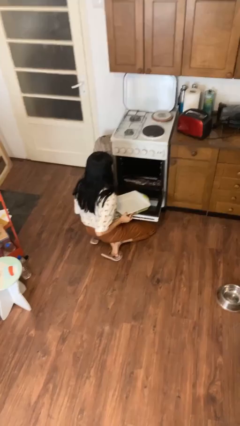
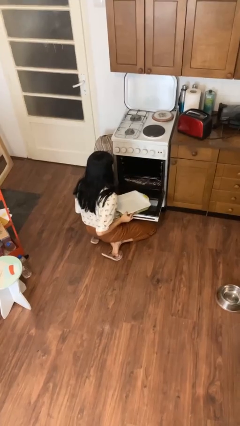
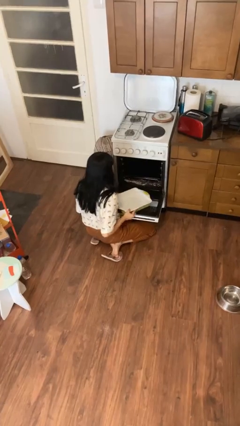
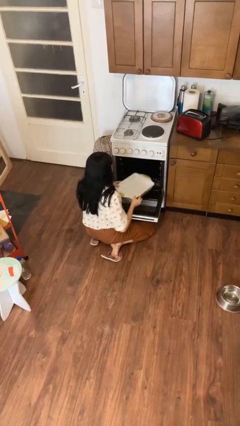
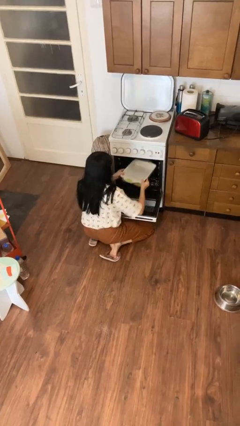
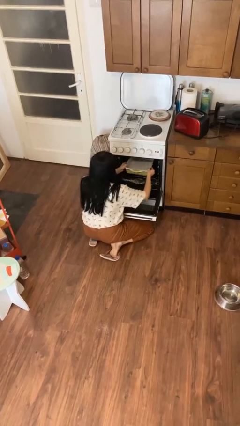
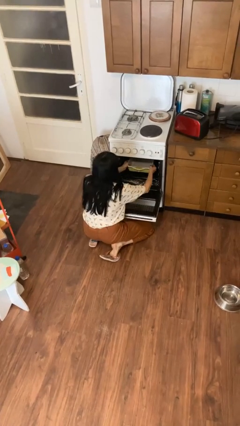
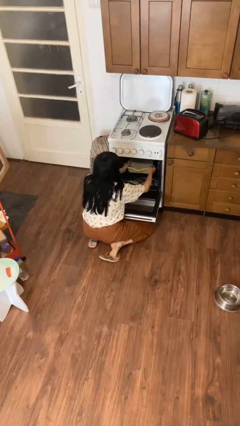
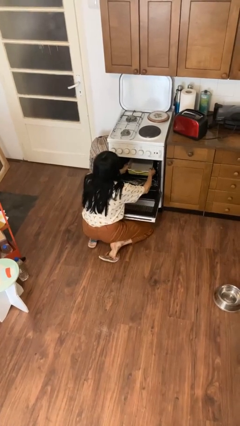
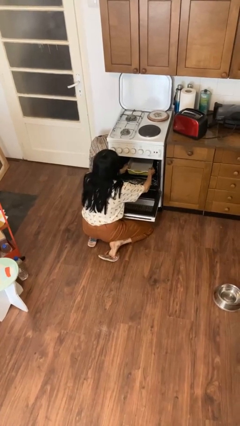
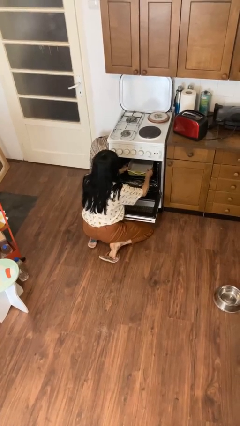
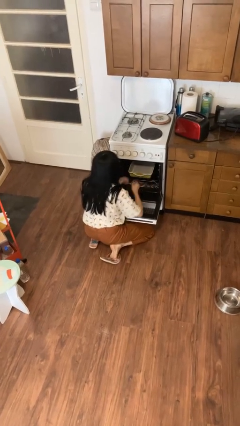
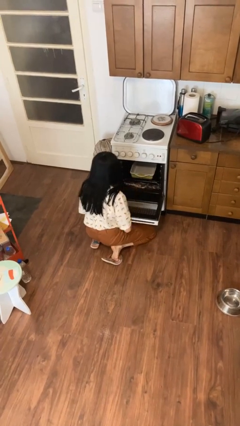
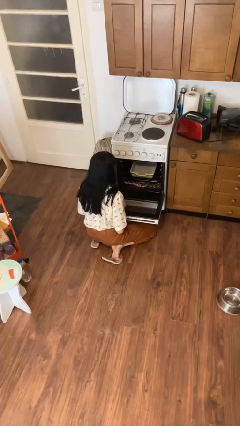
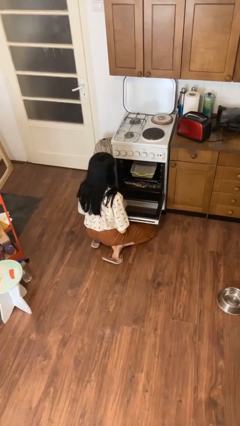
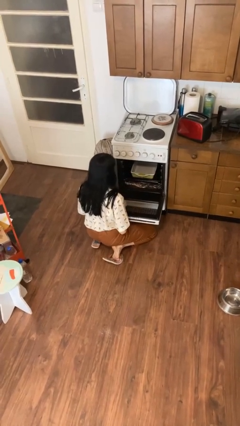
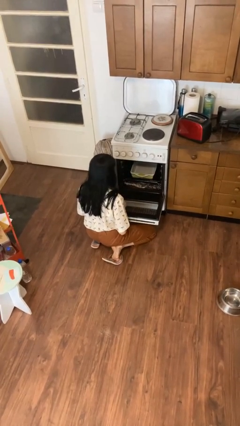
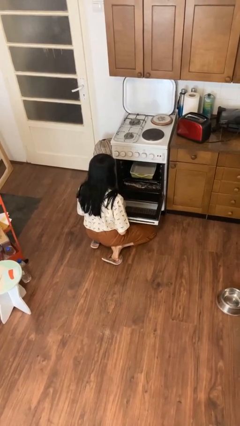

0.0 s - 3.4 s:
person puts object into oven

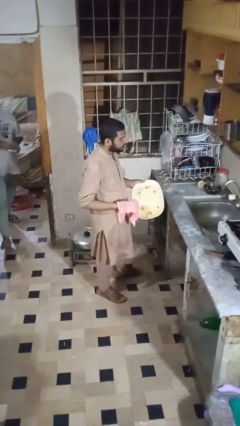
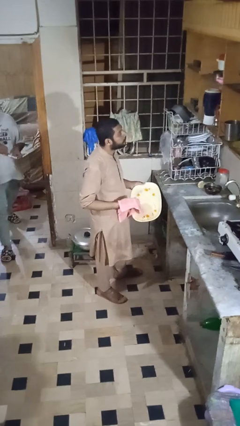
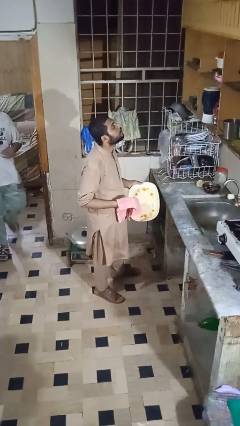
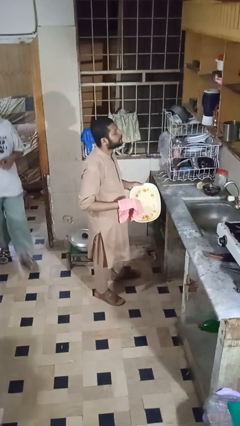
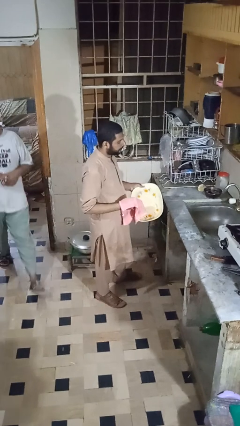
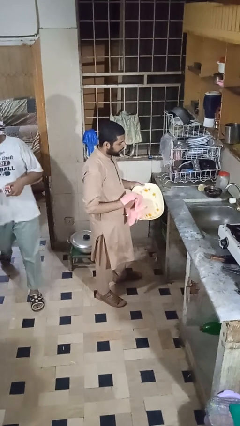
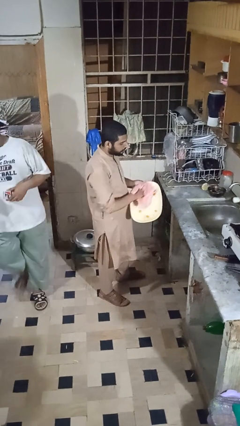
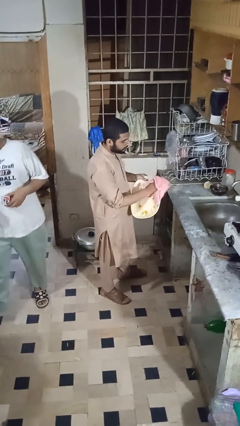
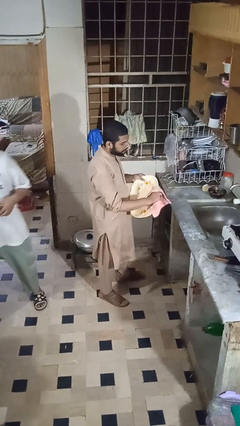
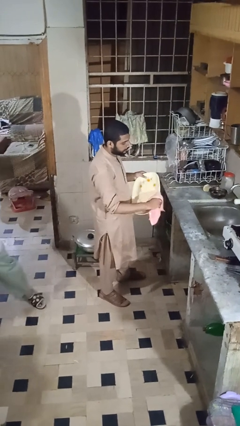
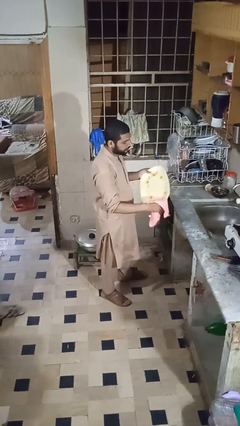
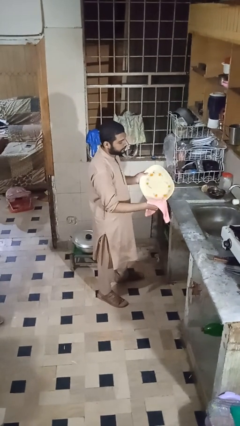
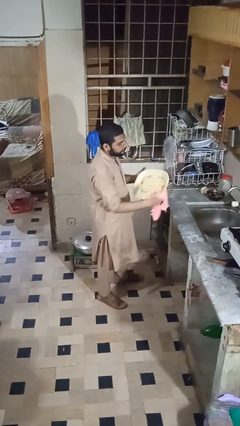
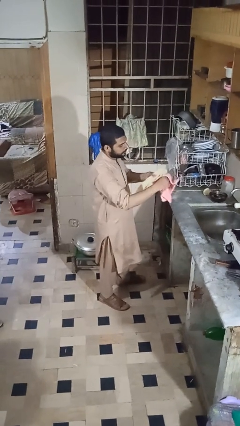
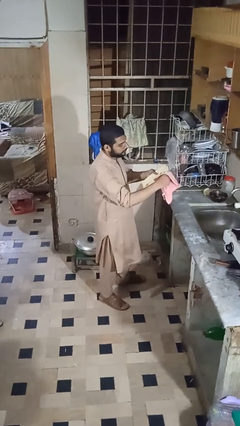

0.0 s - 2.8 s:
person dries dish

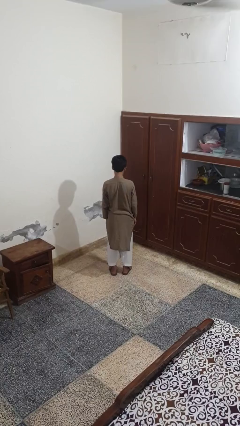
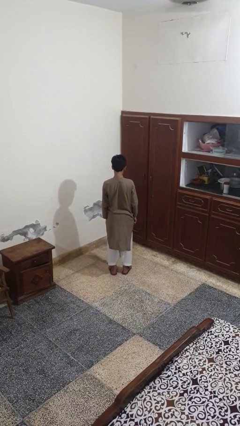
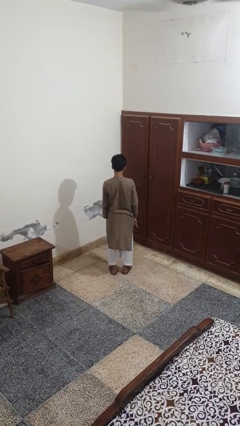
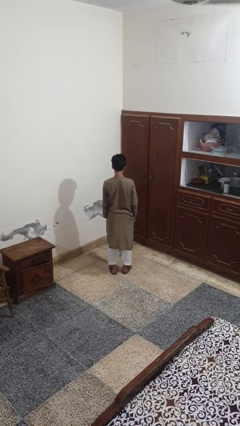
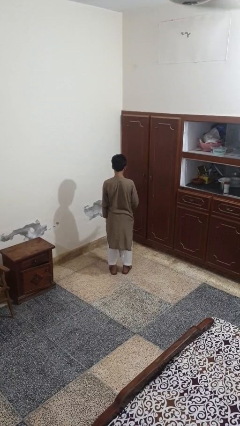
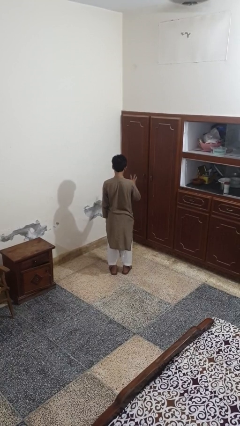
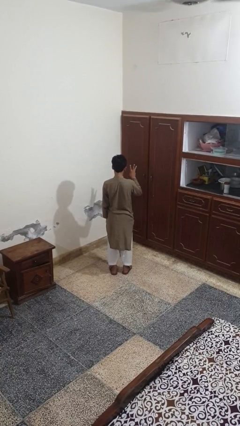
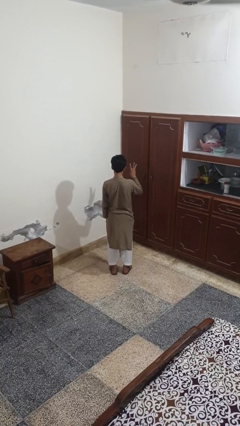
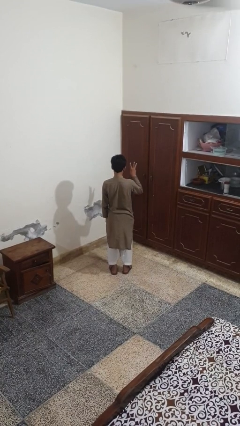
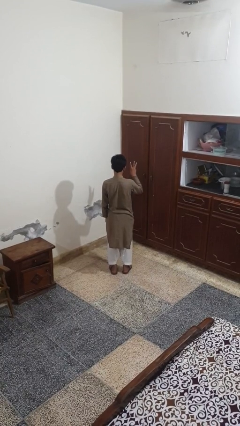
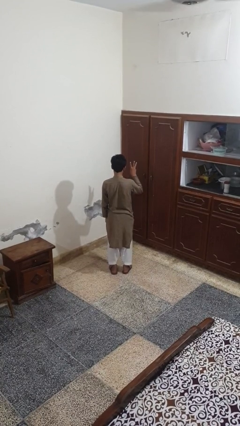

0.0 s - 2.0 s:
person gestures number three

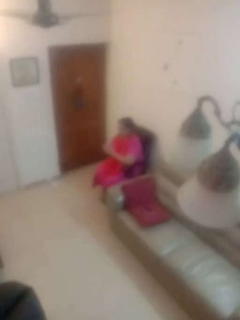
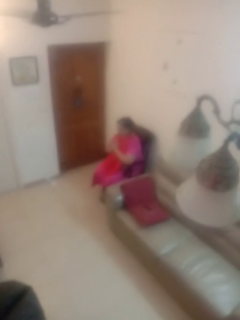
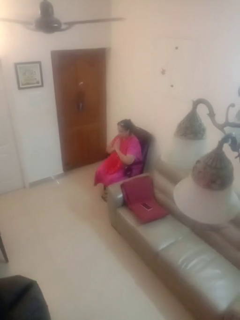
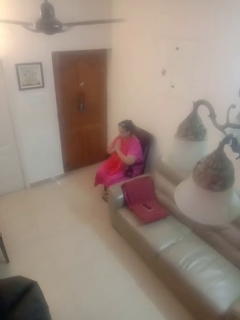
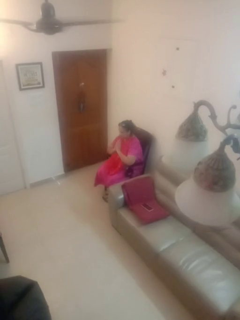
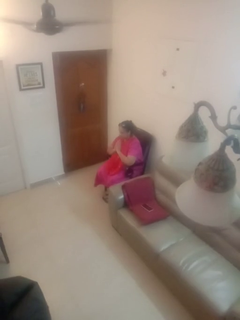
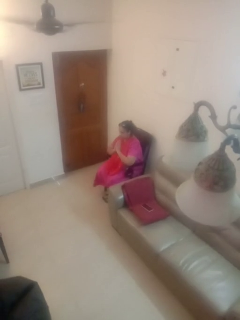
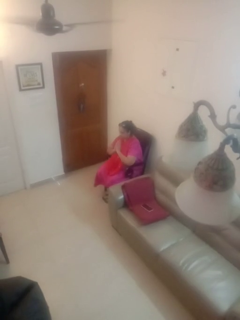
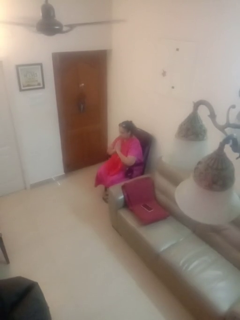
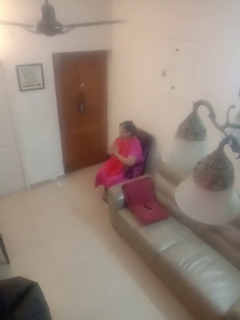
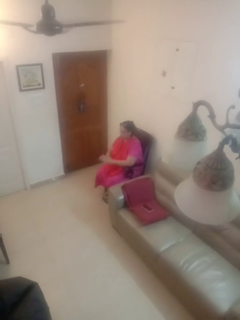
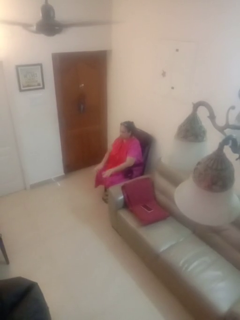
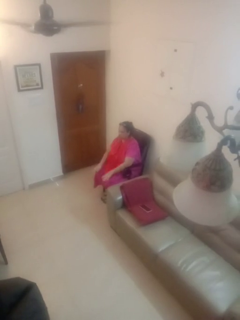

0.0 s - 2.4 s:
person prays

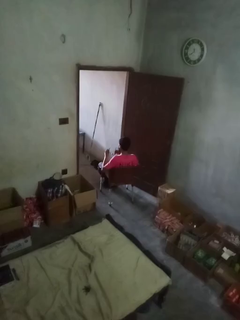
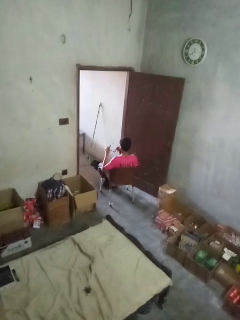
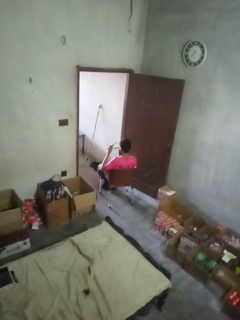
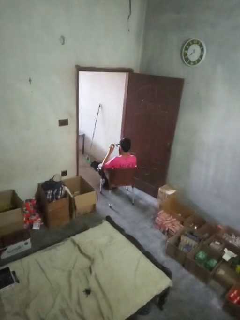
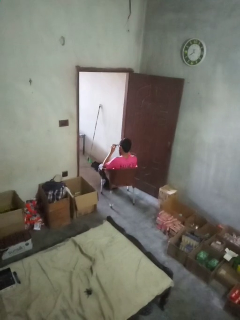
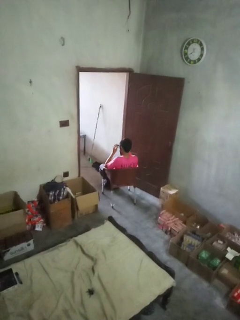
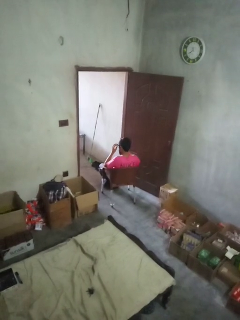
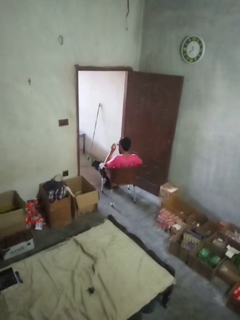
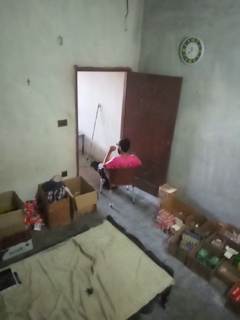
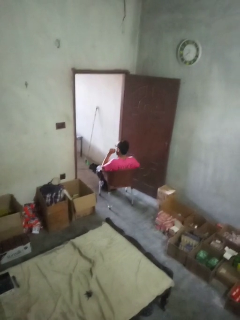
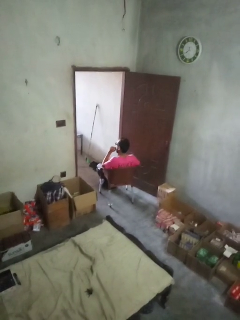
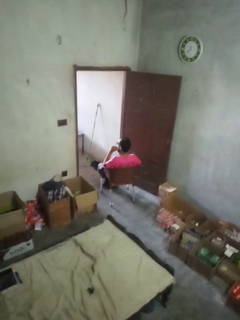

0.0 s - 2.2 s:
person puts on glasses

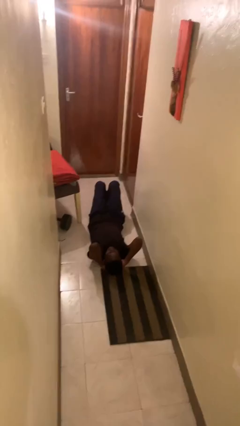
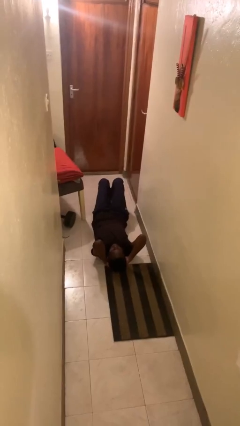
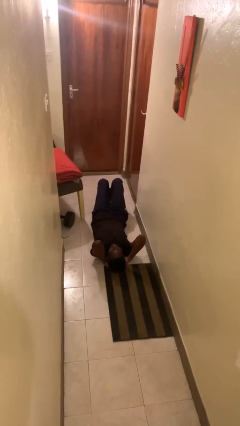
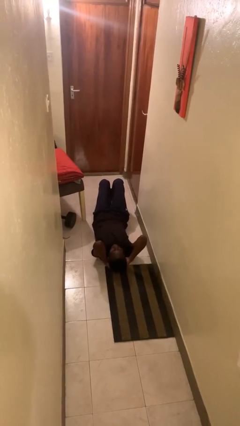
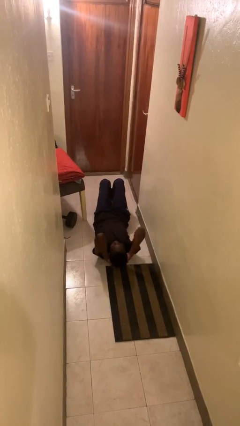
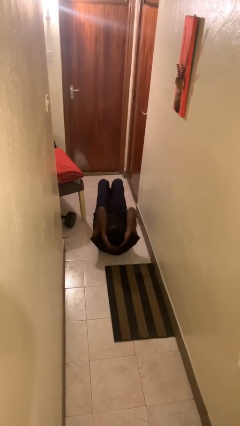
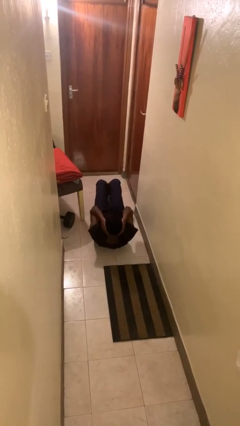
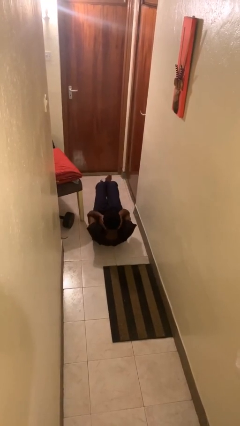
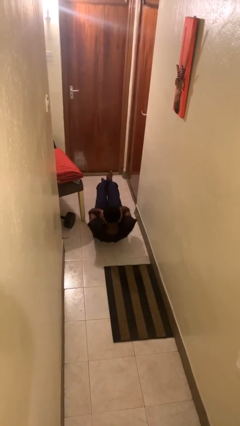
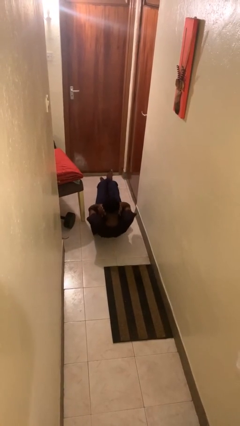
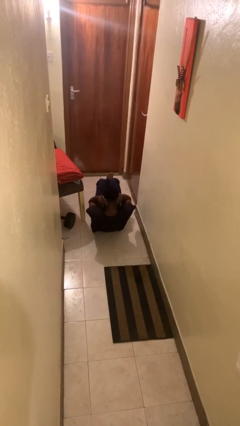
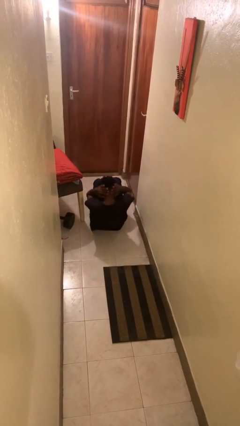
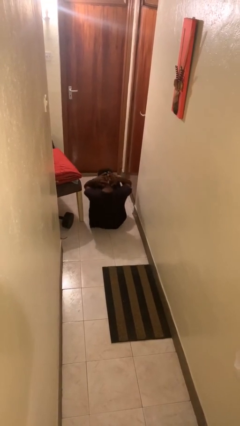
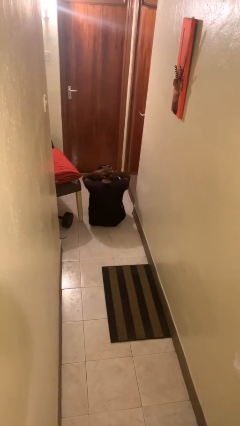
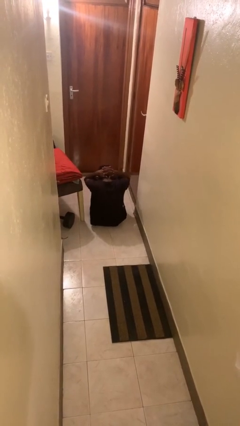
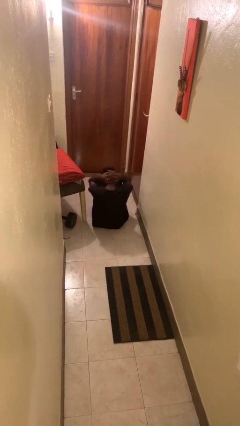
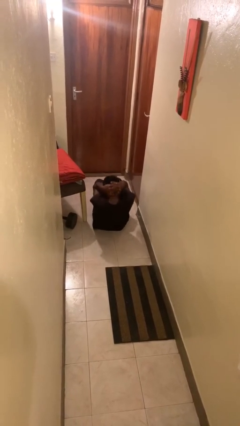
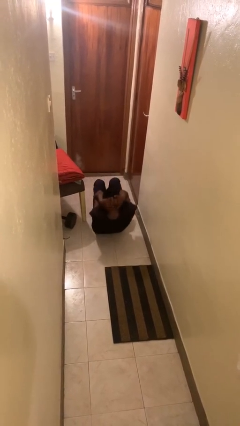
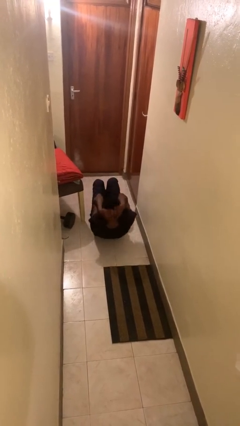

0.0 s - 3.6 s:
person exercises with situp

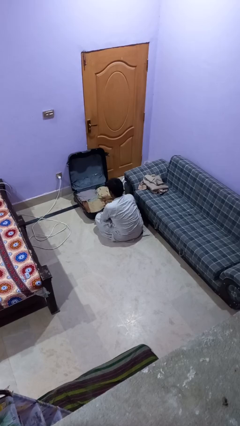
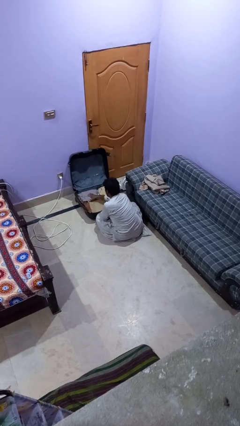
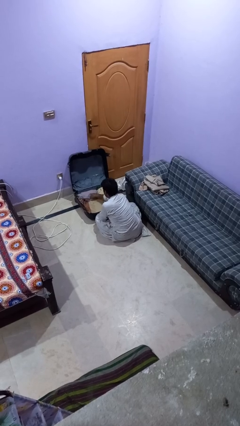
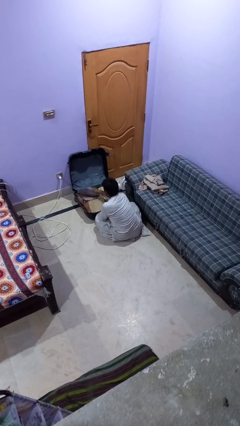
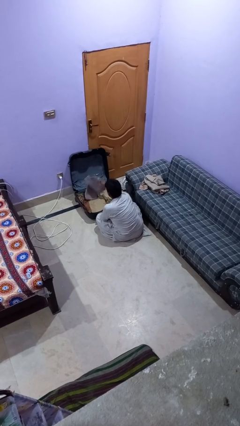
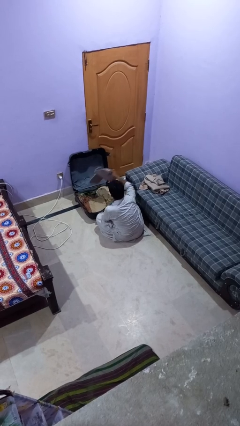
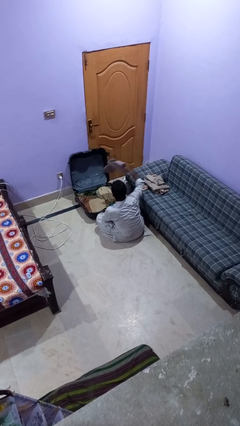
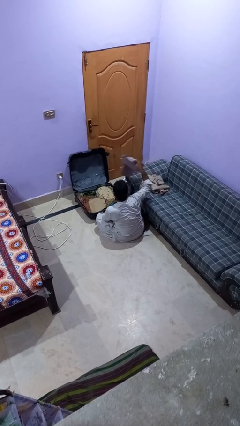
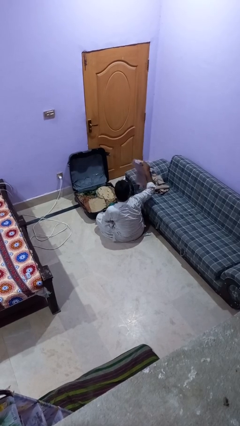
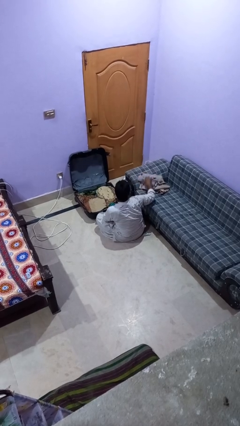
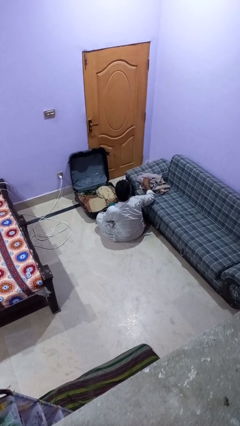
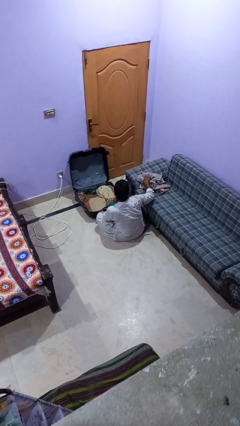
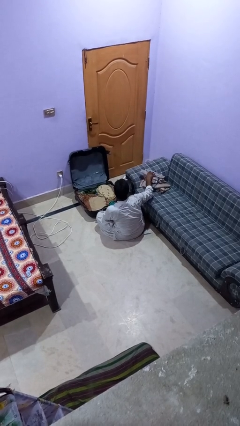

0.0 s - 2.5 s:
person unloads clothes from suitcase
